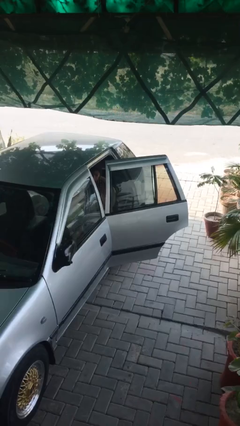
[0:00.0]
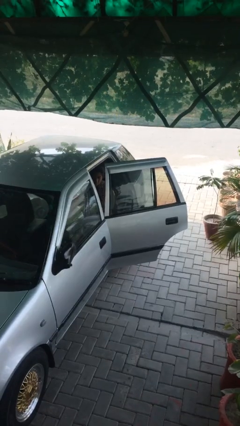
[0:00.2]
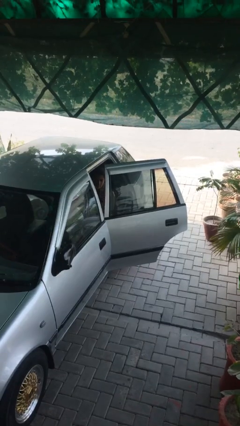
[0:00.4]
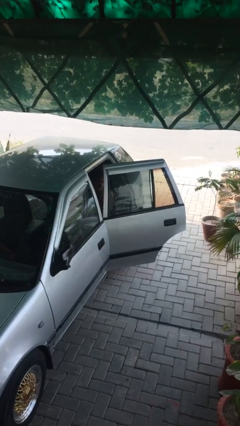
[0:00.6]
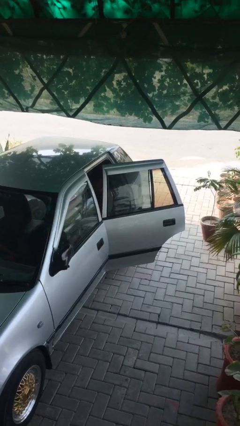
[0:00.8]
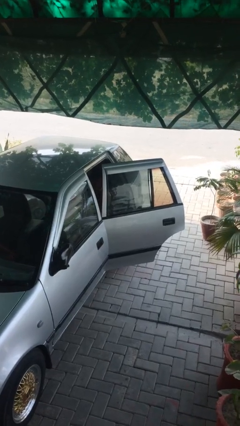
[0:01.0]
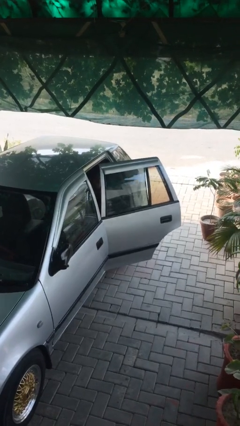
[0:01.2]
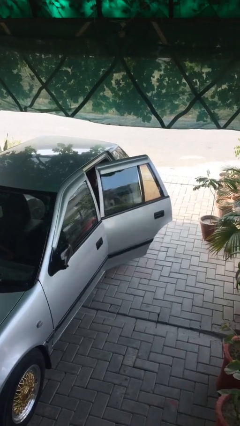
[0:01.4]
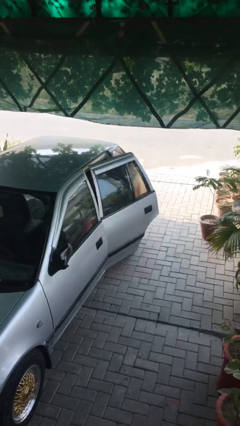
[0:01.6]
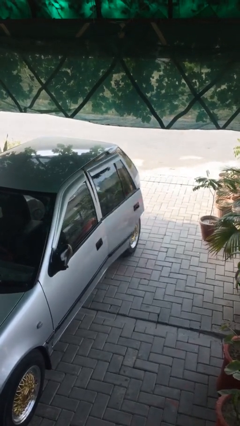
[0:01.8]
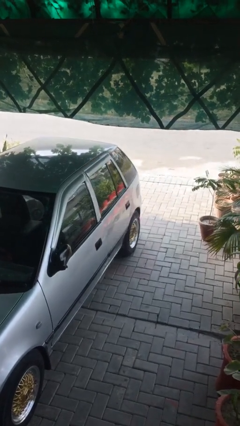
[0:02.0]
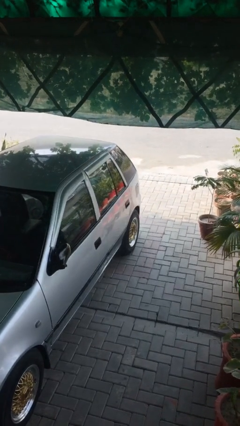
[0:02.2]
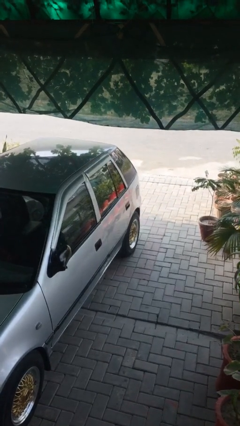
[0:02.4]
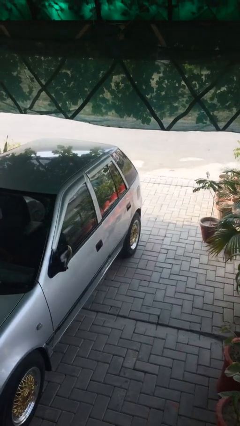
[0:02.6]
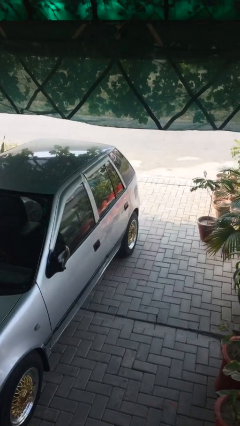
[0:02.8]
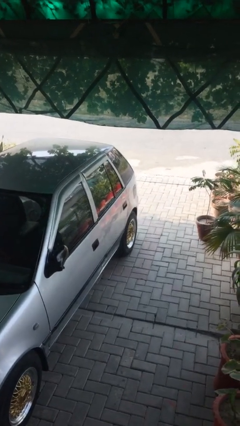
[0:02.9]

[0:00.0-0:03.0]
person closes car door

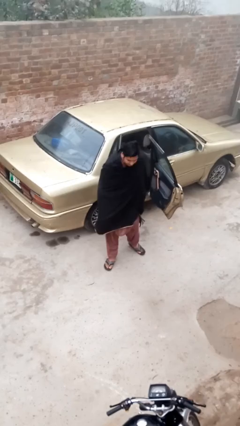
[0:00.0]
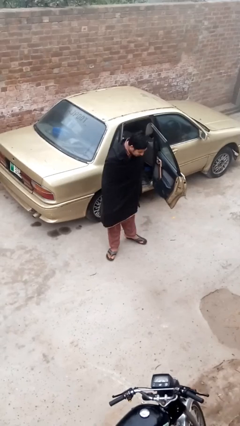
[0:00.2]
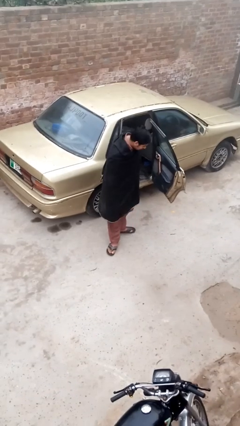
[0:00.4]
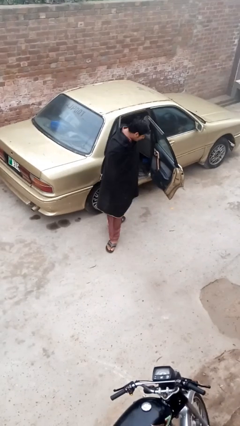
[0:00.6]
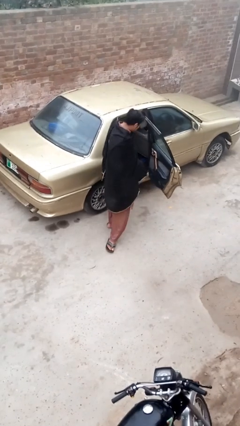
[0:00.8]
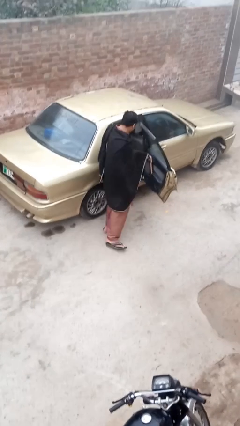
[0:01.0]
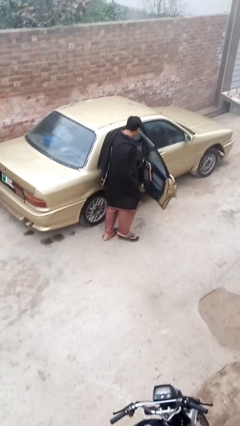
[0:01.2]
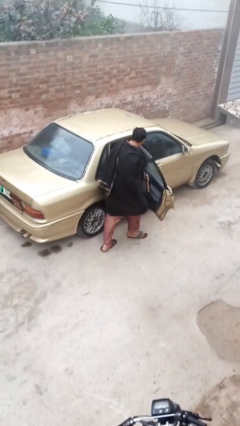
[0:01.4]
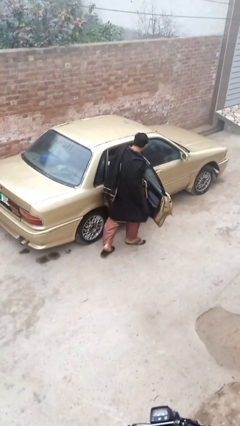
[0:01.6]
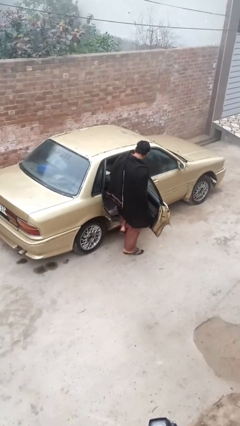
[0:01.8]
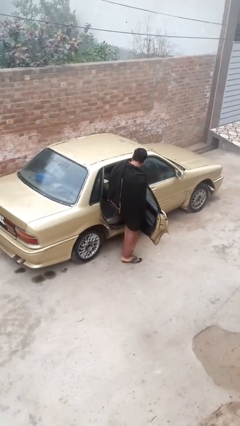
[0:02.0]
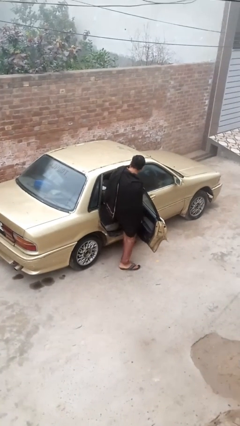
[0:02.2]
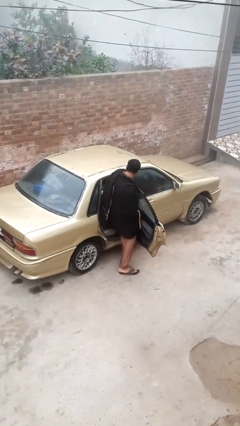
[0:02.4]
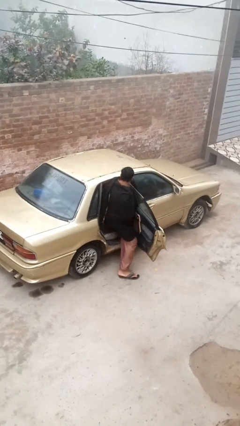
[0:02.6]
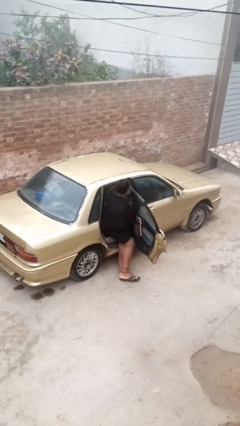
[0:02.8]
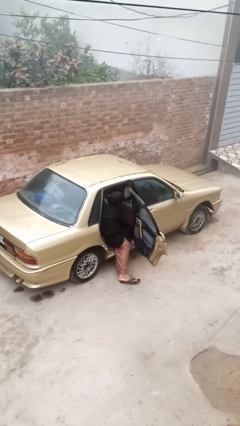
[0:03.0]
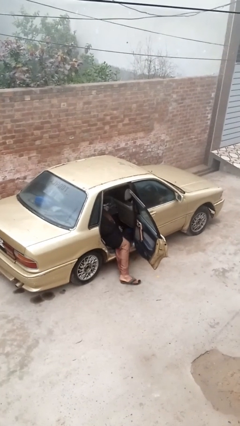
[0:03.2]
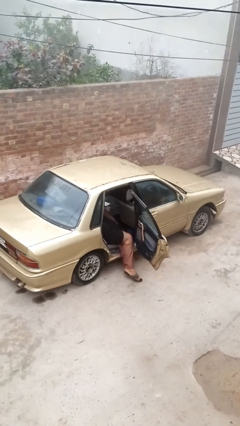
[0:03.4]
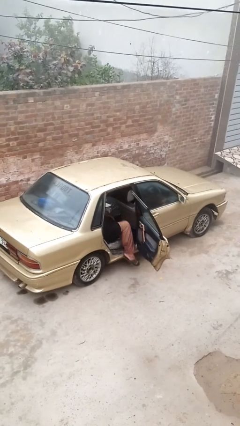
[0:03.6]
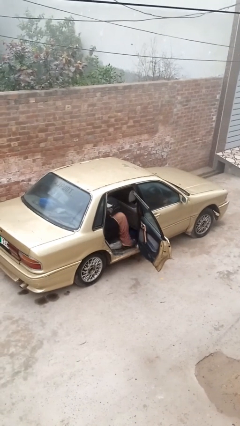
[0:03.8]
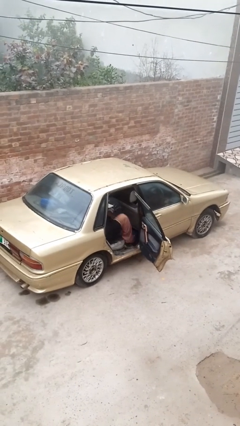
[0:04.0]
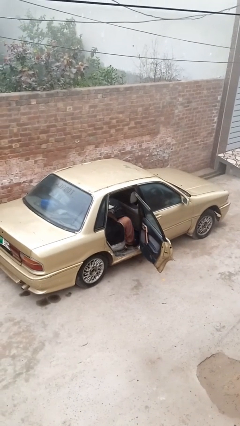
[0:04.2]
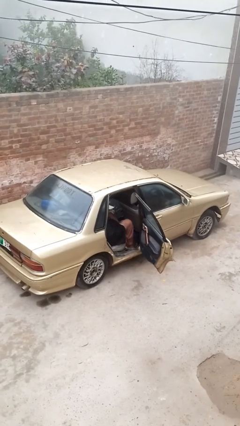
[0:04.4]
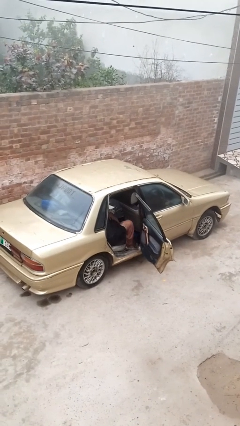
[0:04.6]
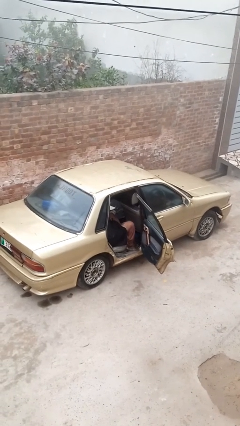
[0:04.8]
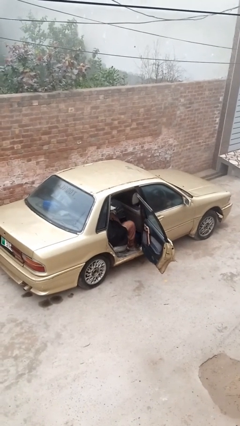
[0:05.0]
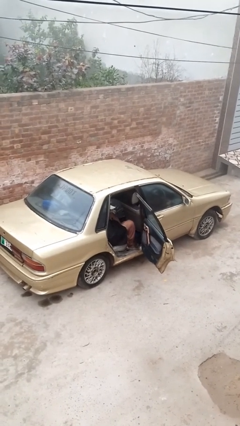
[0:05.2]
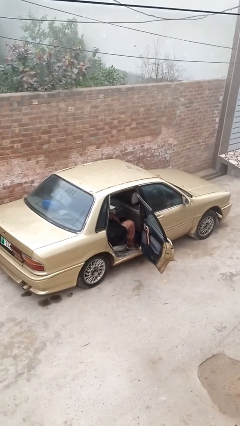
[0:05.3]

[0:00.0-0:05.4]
person enters car

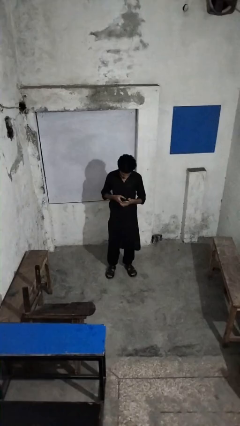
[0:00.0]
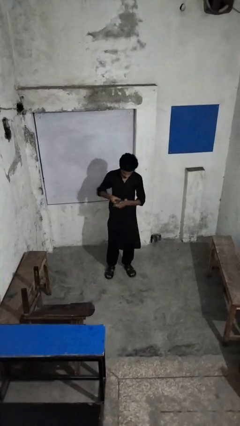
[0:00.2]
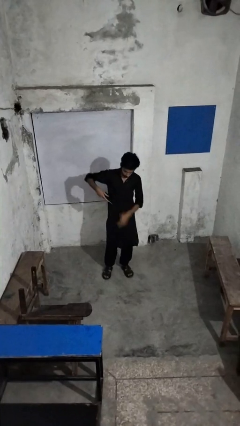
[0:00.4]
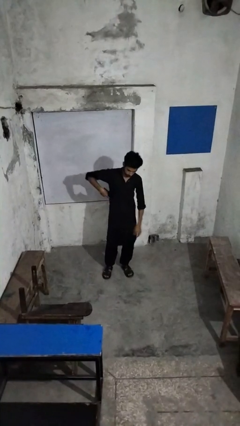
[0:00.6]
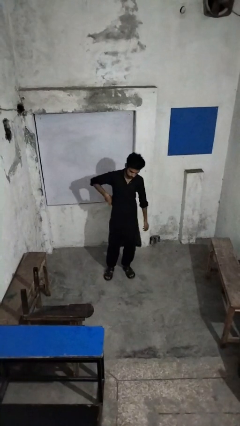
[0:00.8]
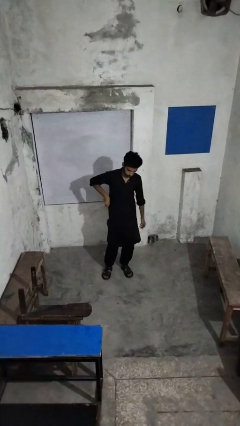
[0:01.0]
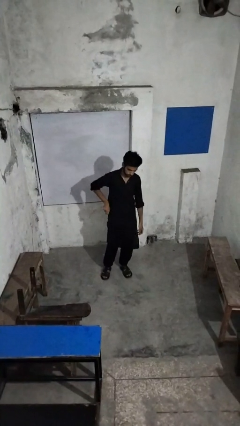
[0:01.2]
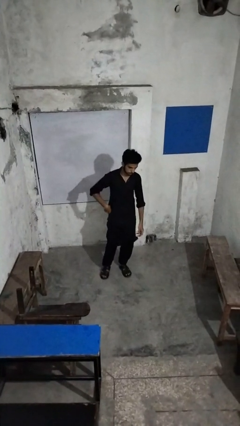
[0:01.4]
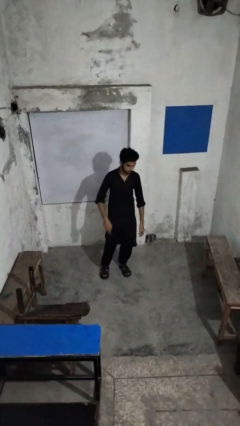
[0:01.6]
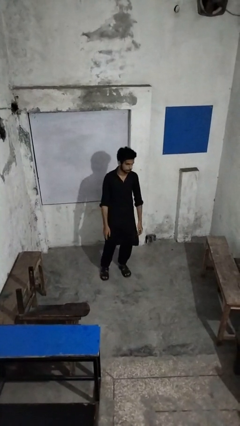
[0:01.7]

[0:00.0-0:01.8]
person puts phone into pocket

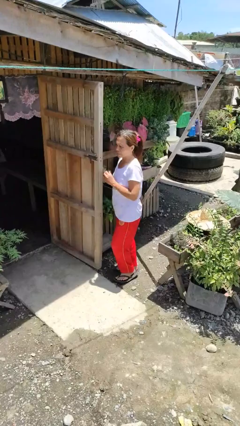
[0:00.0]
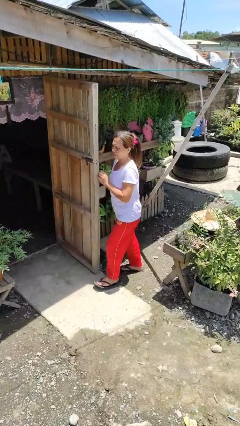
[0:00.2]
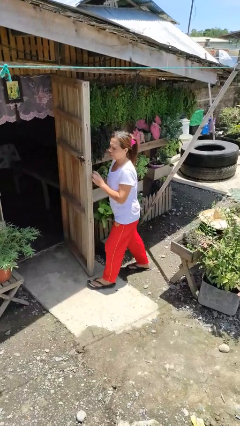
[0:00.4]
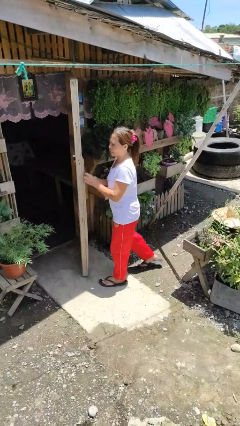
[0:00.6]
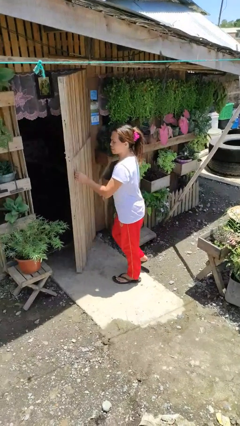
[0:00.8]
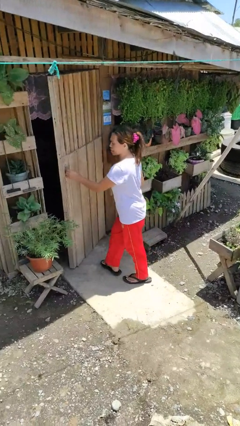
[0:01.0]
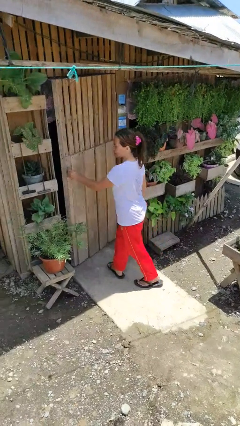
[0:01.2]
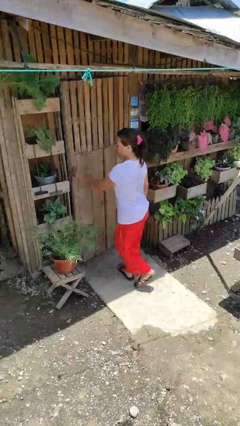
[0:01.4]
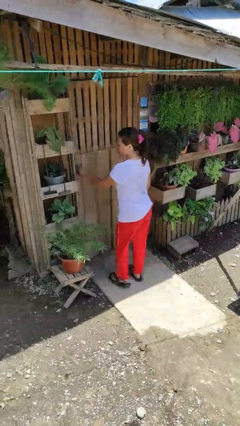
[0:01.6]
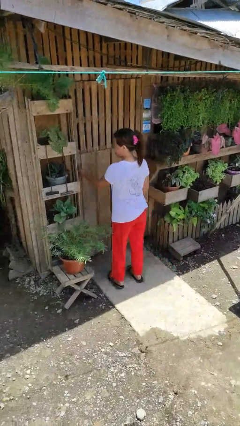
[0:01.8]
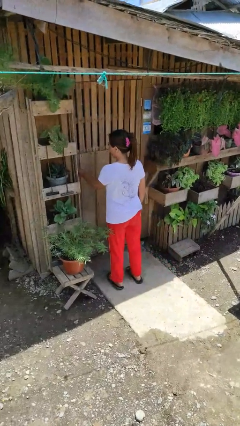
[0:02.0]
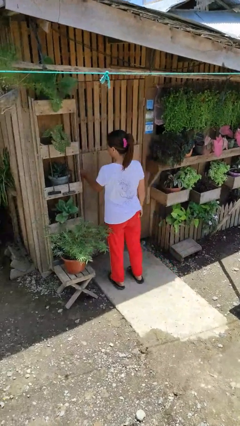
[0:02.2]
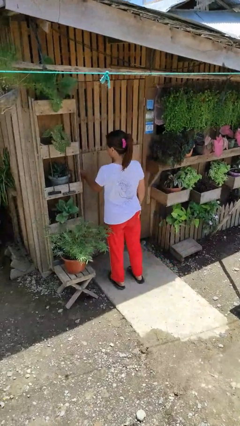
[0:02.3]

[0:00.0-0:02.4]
person closes facility door

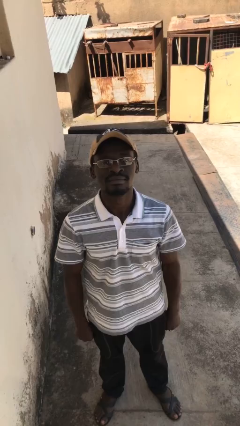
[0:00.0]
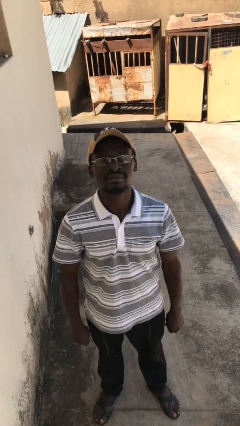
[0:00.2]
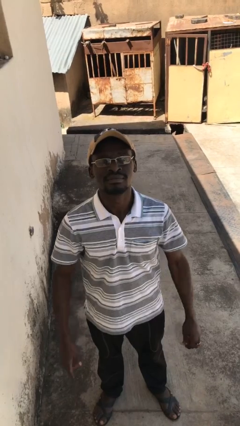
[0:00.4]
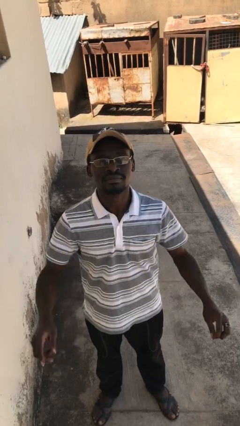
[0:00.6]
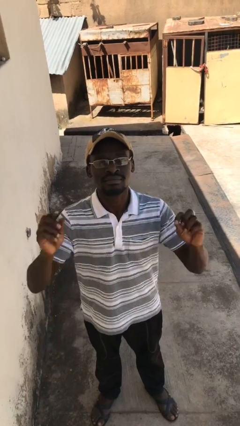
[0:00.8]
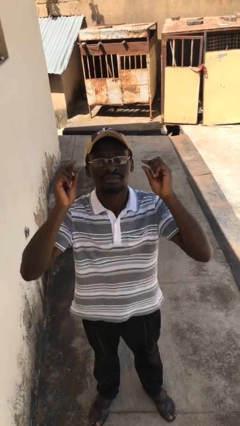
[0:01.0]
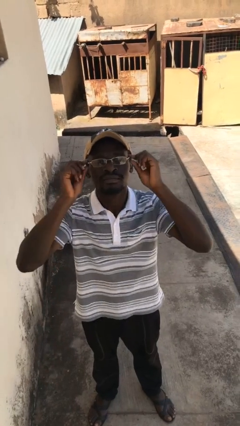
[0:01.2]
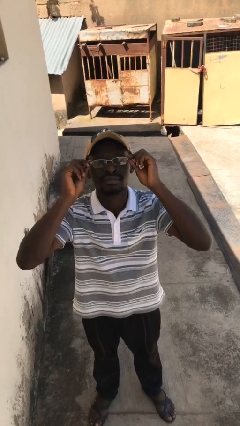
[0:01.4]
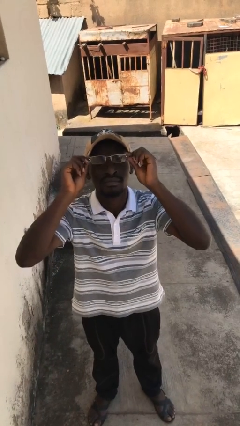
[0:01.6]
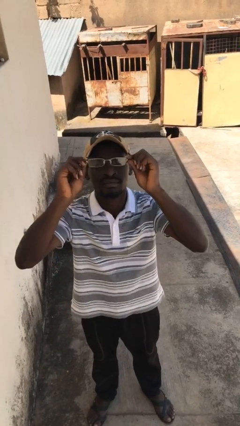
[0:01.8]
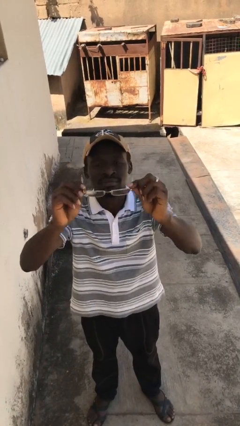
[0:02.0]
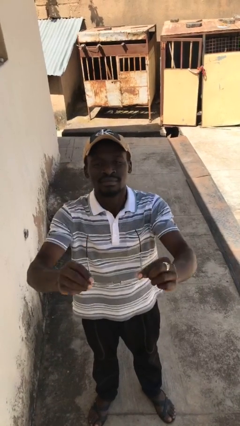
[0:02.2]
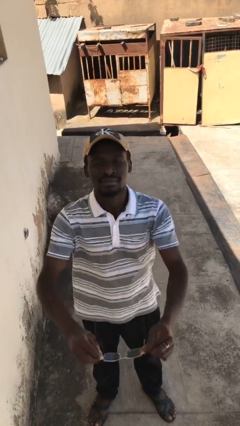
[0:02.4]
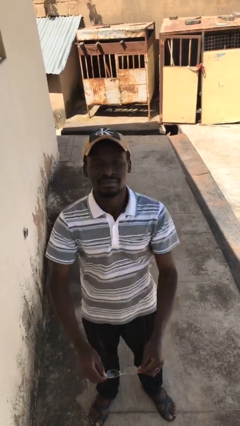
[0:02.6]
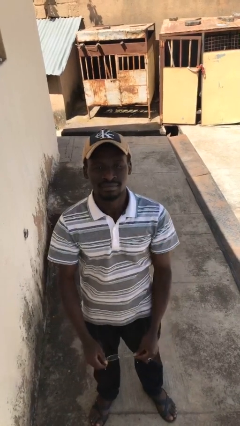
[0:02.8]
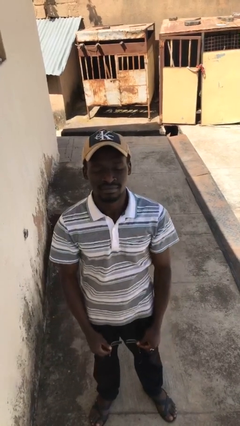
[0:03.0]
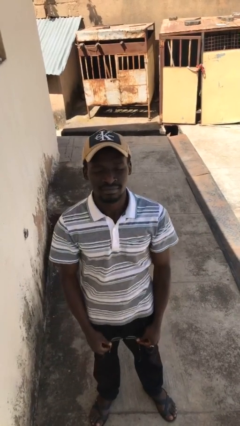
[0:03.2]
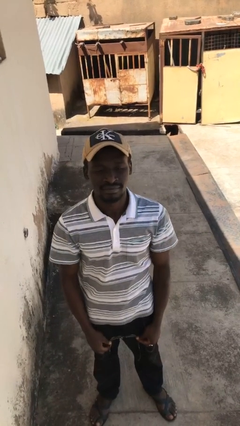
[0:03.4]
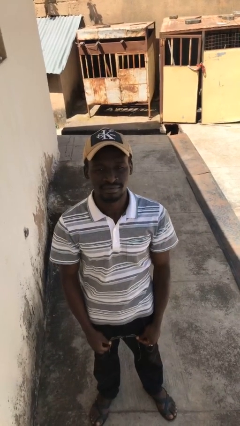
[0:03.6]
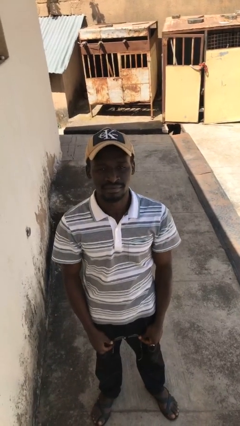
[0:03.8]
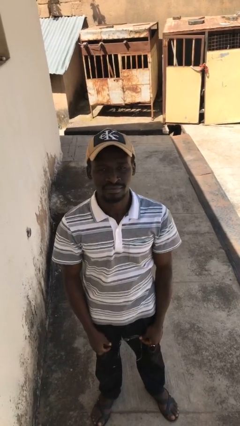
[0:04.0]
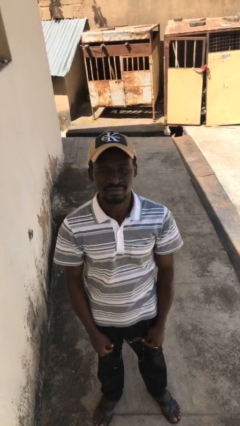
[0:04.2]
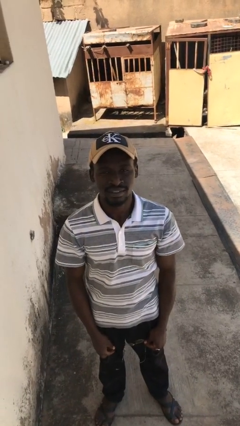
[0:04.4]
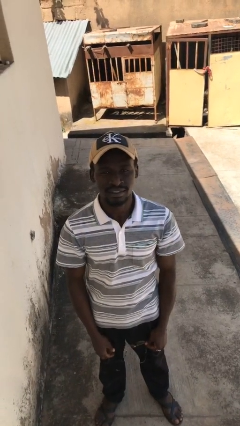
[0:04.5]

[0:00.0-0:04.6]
person takes off glasses

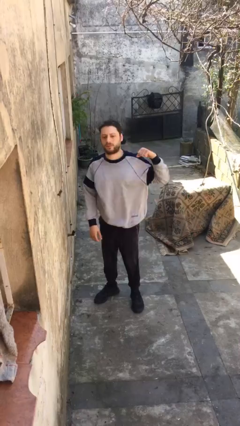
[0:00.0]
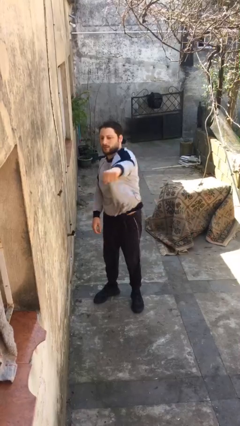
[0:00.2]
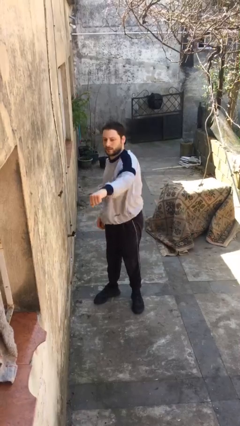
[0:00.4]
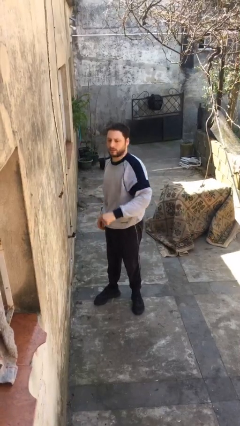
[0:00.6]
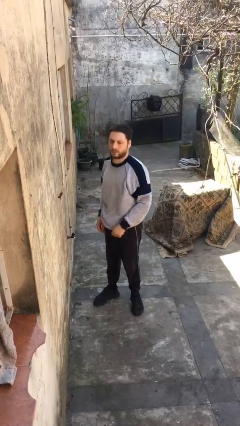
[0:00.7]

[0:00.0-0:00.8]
person punches
